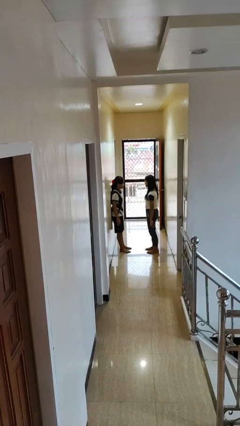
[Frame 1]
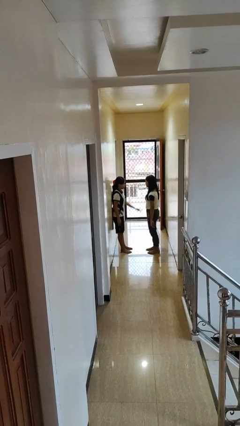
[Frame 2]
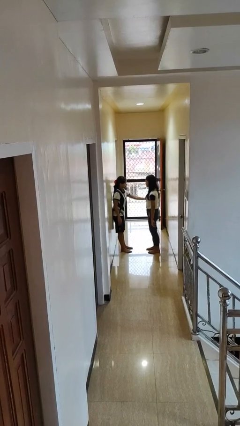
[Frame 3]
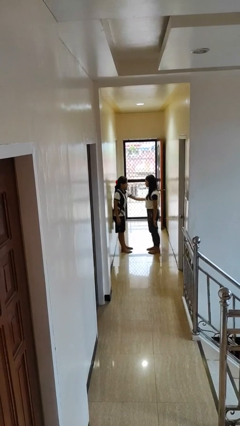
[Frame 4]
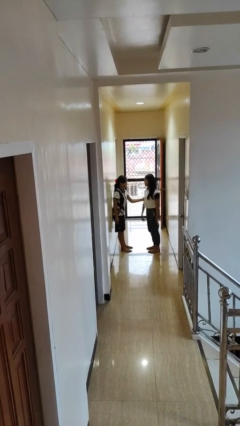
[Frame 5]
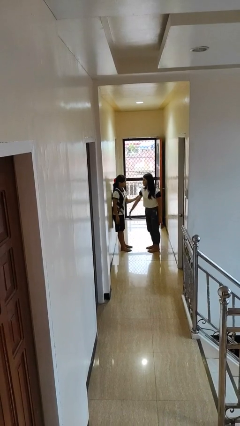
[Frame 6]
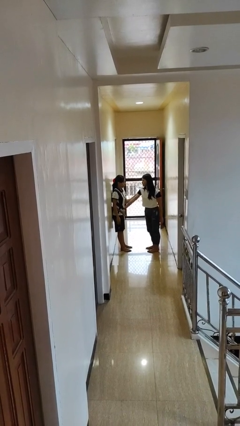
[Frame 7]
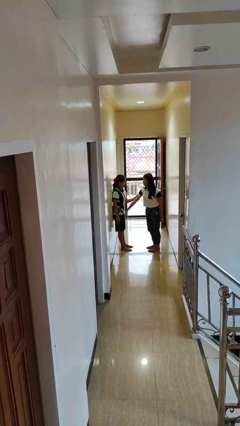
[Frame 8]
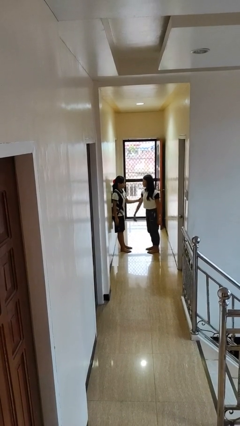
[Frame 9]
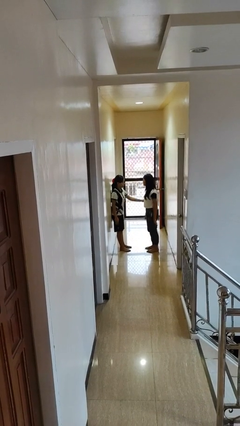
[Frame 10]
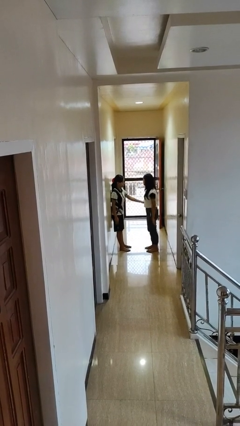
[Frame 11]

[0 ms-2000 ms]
person grabs person by bicep

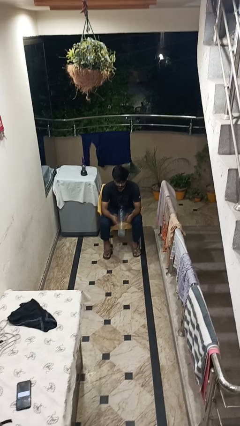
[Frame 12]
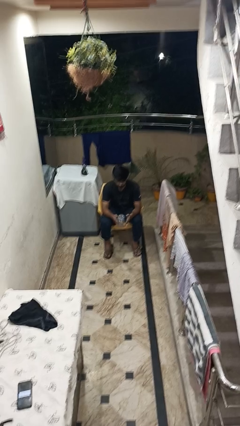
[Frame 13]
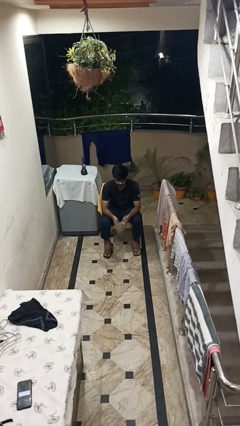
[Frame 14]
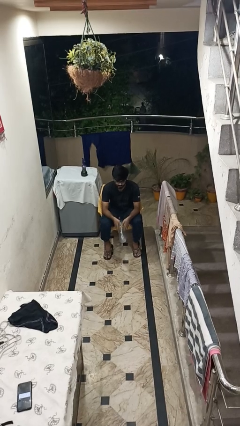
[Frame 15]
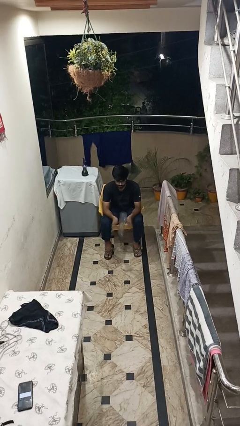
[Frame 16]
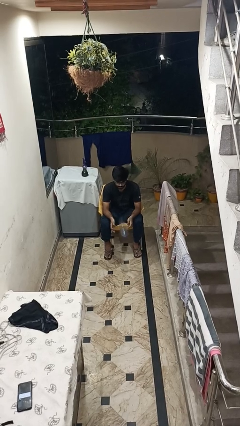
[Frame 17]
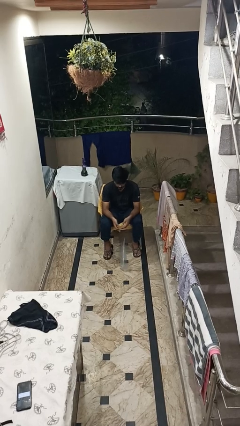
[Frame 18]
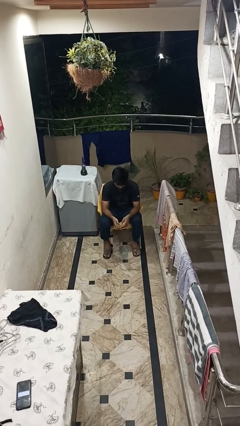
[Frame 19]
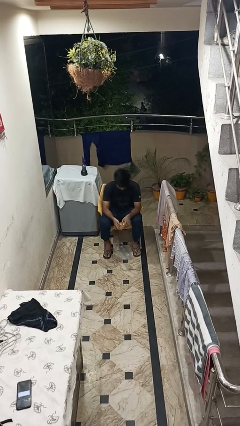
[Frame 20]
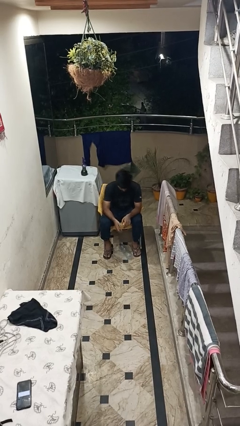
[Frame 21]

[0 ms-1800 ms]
person drops object

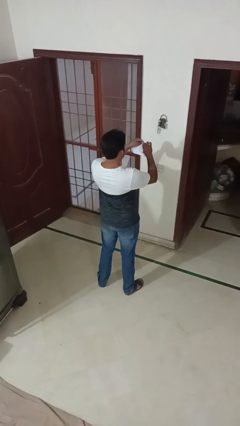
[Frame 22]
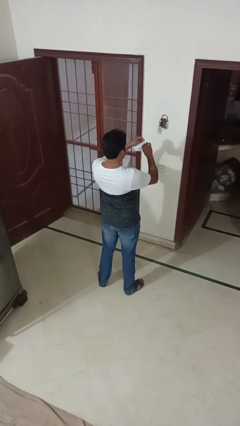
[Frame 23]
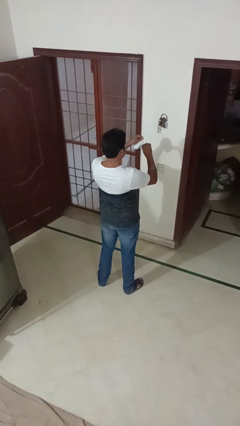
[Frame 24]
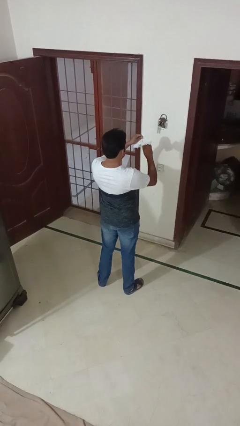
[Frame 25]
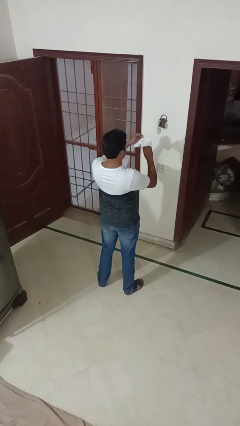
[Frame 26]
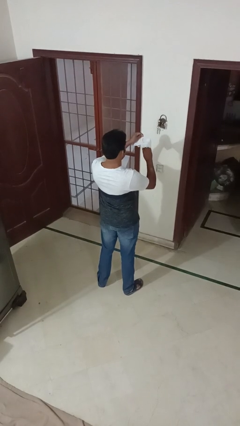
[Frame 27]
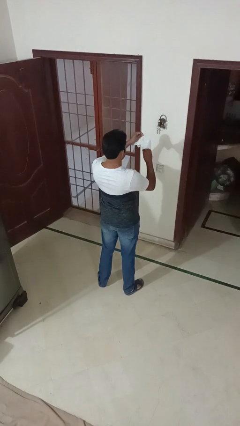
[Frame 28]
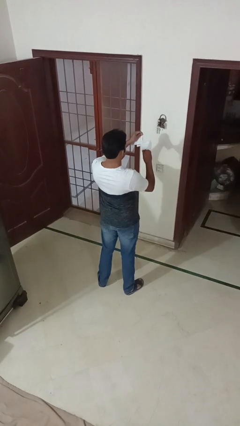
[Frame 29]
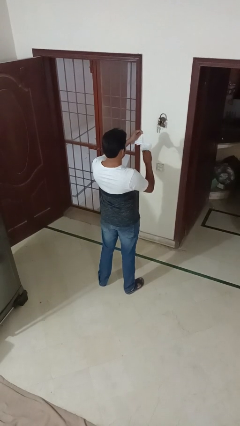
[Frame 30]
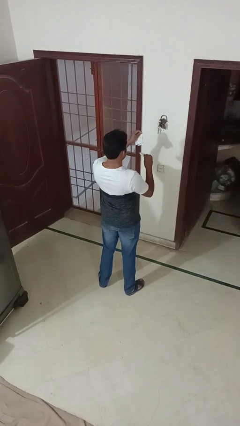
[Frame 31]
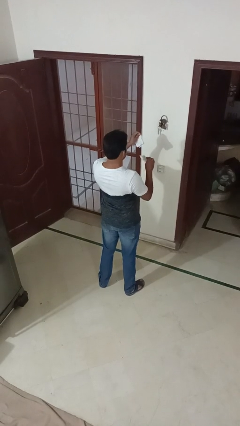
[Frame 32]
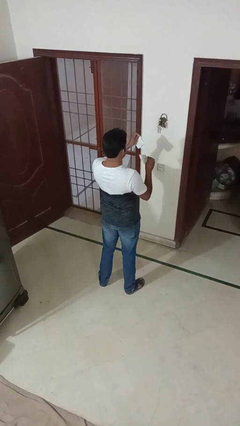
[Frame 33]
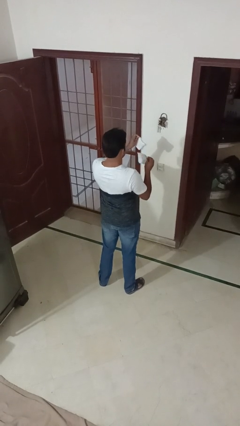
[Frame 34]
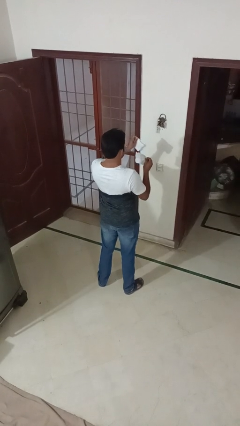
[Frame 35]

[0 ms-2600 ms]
person tears paper

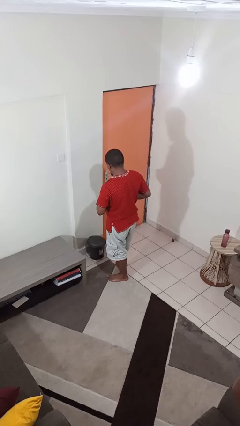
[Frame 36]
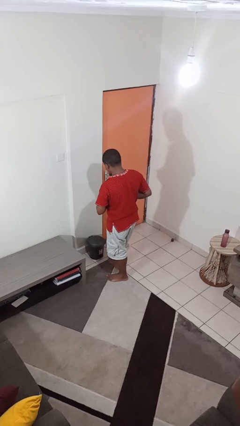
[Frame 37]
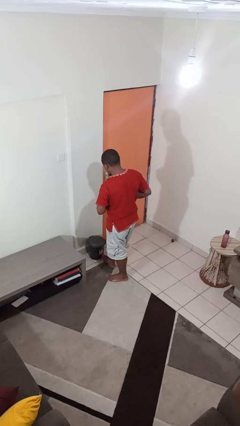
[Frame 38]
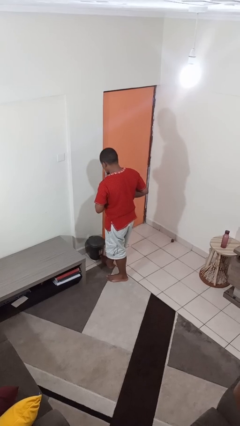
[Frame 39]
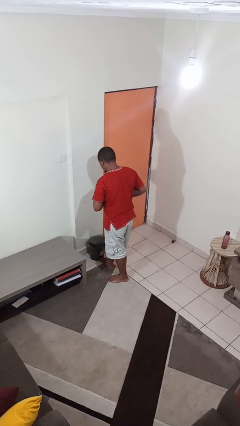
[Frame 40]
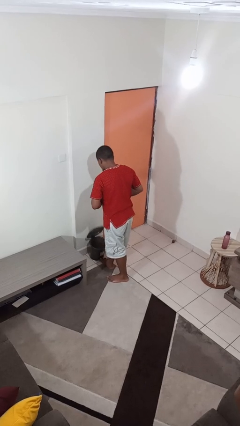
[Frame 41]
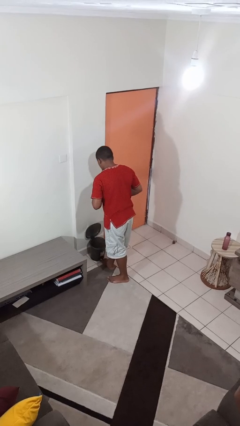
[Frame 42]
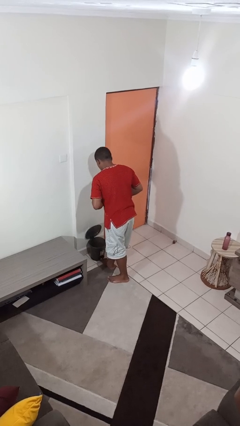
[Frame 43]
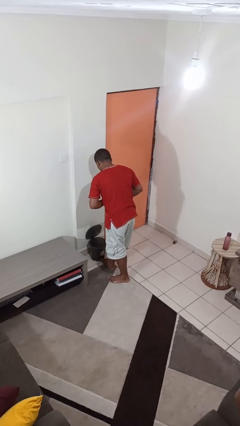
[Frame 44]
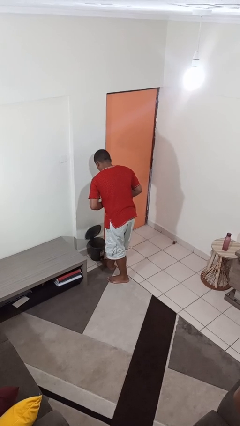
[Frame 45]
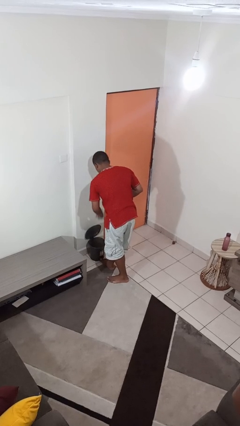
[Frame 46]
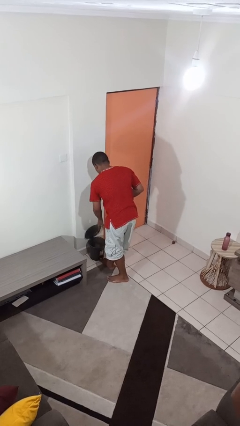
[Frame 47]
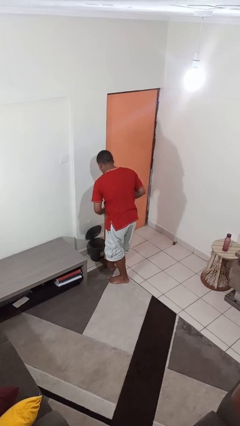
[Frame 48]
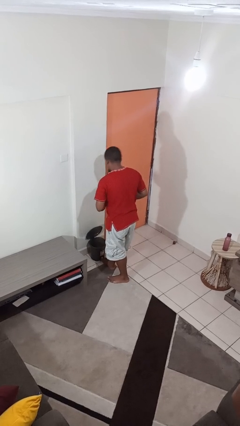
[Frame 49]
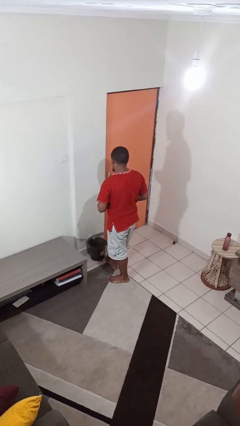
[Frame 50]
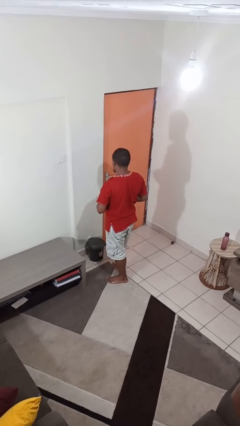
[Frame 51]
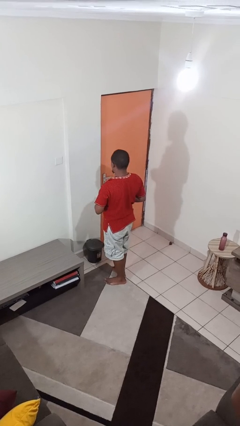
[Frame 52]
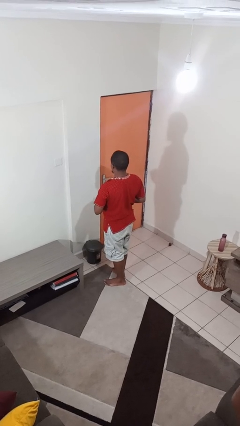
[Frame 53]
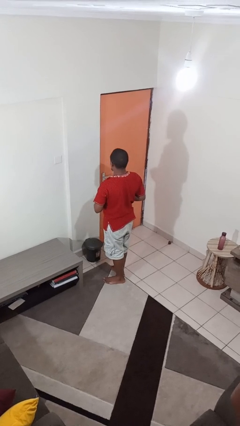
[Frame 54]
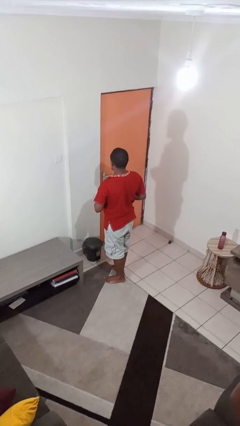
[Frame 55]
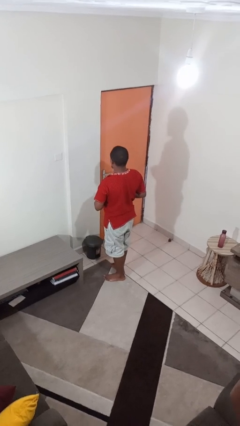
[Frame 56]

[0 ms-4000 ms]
person discards trash

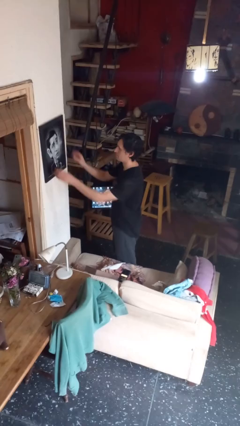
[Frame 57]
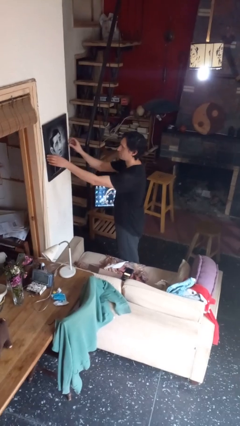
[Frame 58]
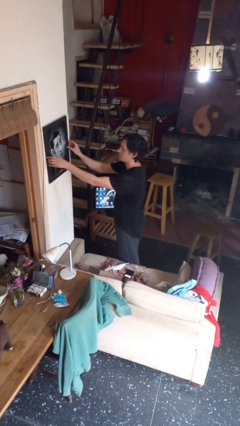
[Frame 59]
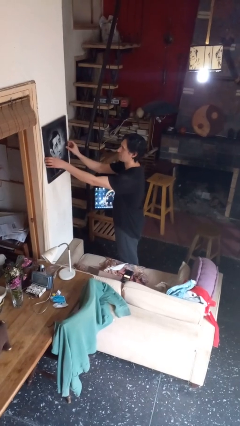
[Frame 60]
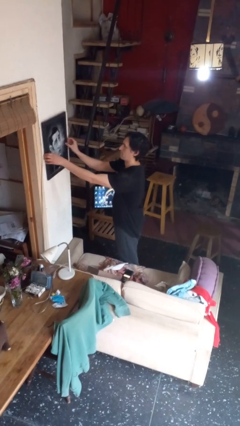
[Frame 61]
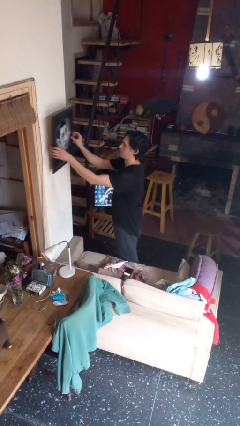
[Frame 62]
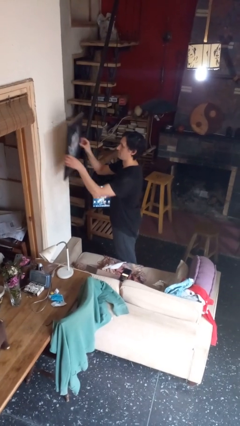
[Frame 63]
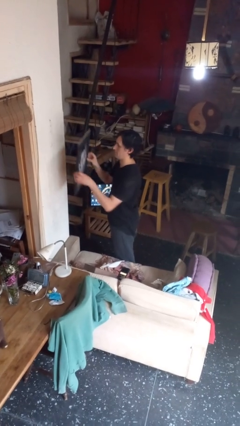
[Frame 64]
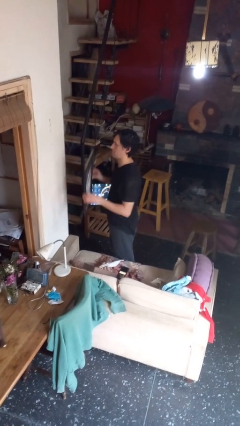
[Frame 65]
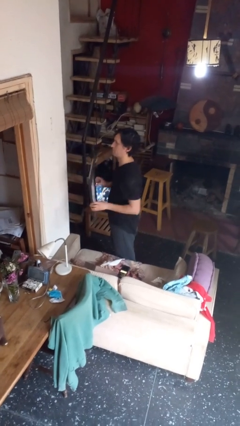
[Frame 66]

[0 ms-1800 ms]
person takes down picture frame

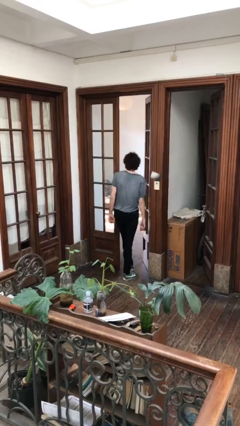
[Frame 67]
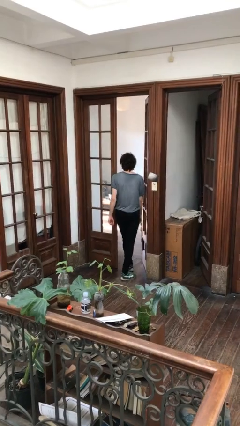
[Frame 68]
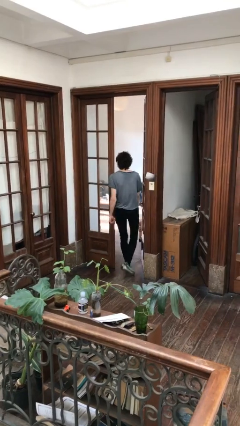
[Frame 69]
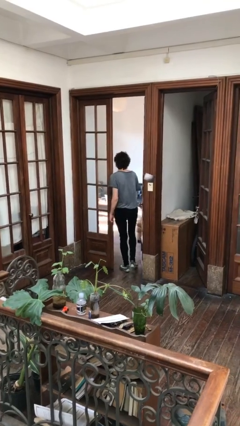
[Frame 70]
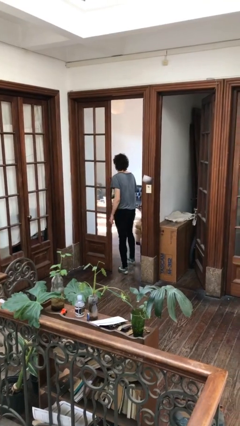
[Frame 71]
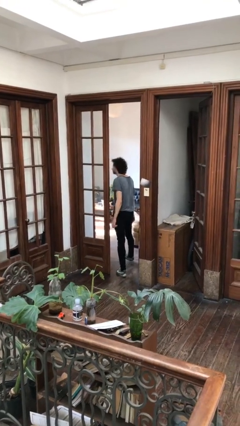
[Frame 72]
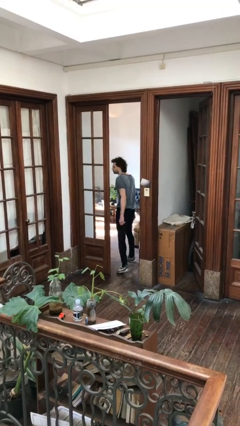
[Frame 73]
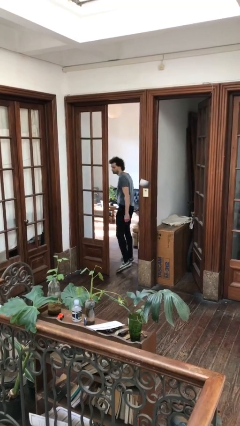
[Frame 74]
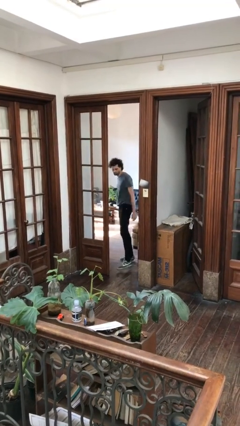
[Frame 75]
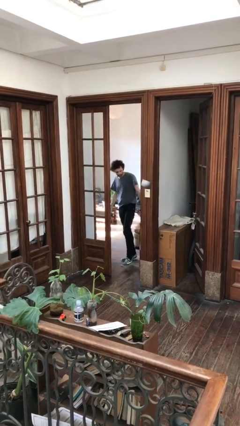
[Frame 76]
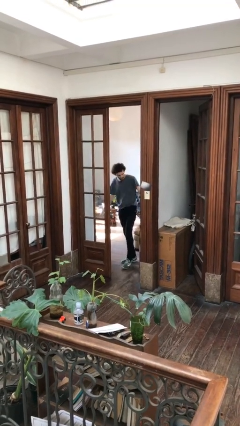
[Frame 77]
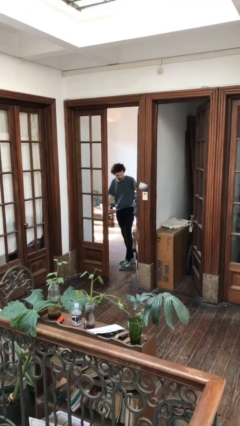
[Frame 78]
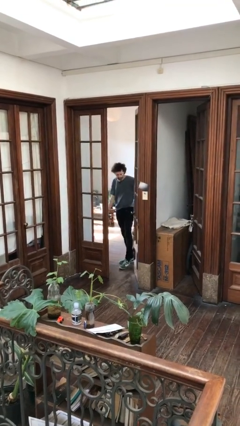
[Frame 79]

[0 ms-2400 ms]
person exits scene through structure

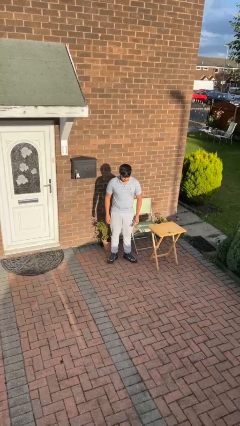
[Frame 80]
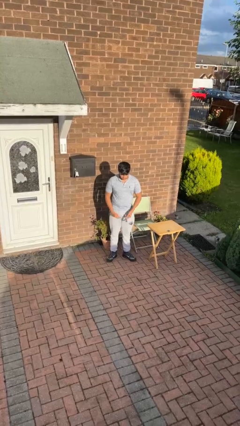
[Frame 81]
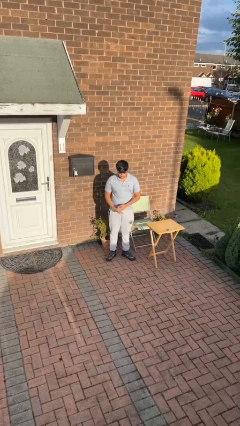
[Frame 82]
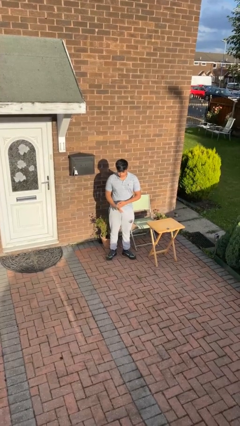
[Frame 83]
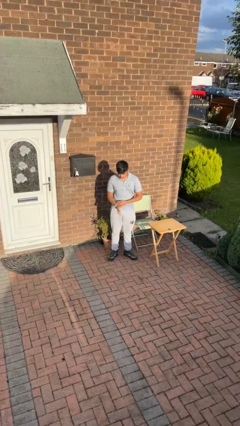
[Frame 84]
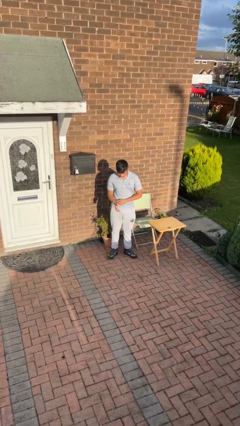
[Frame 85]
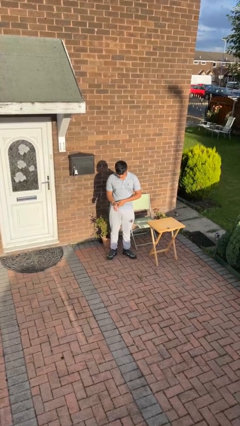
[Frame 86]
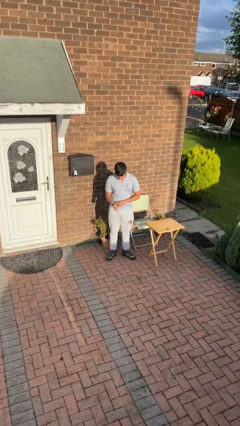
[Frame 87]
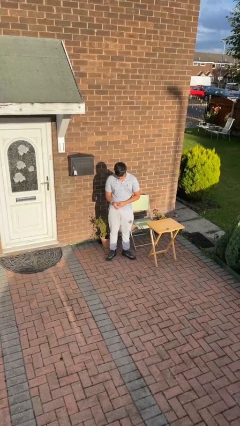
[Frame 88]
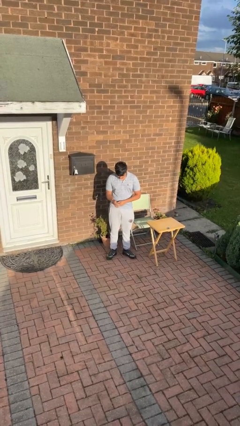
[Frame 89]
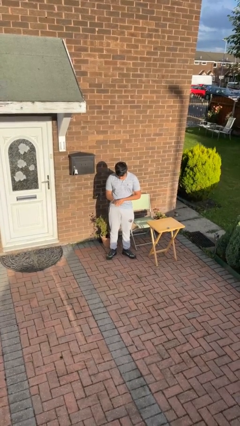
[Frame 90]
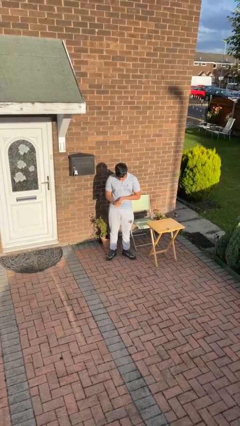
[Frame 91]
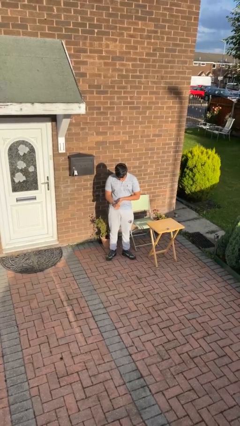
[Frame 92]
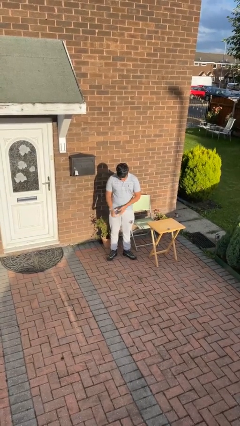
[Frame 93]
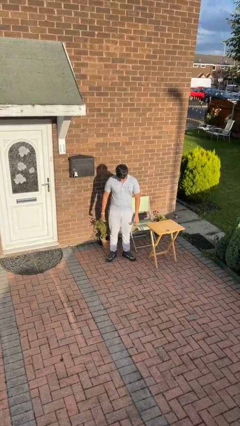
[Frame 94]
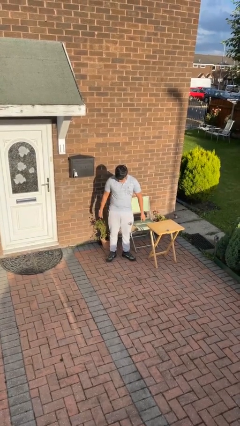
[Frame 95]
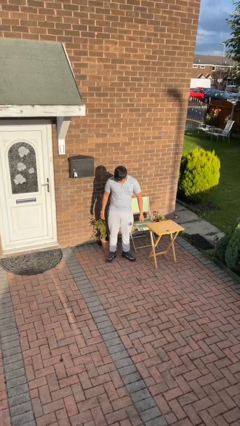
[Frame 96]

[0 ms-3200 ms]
person puts on wristwatch
